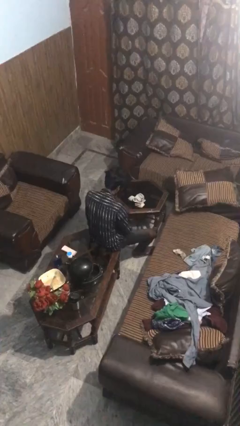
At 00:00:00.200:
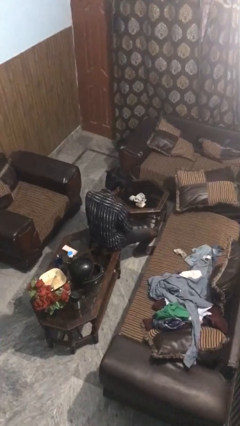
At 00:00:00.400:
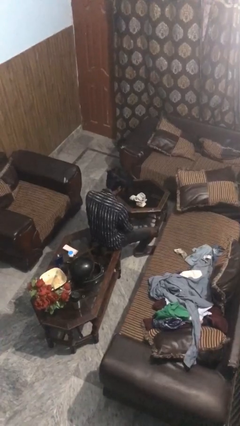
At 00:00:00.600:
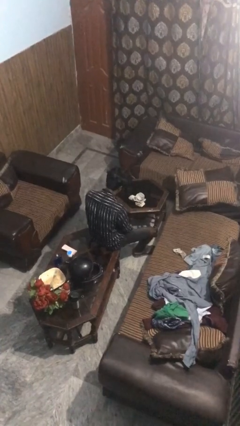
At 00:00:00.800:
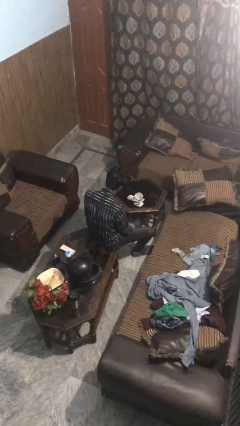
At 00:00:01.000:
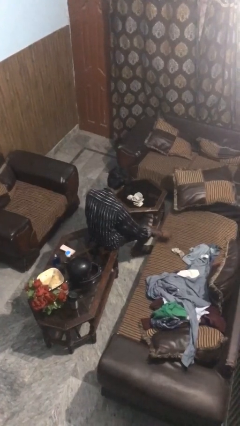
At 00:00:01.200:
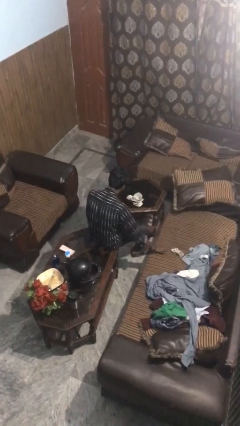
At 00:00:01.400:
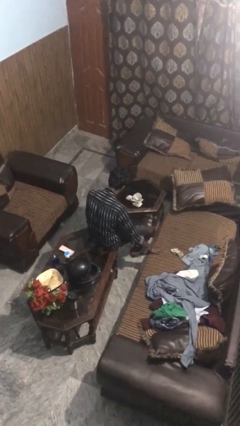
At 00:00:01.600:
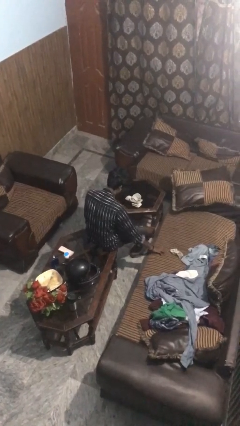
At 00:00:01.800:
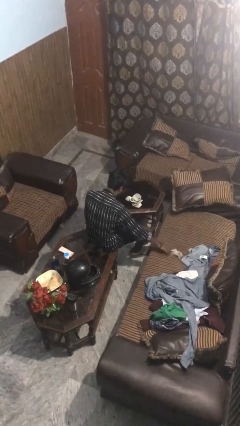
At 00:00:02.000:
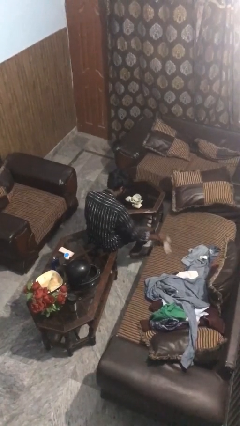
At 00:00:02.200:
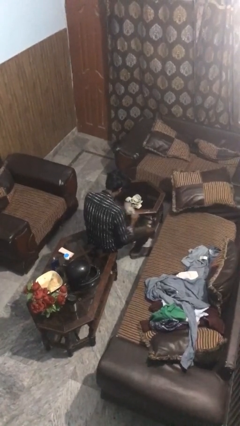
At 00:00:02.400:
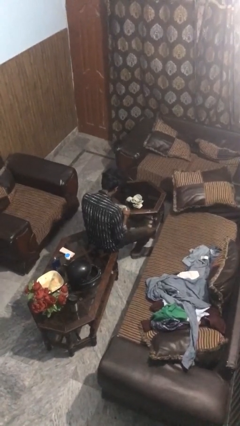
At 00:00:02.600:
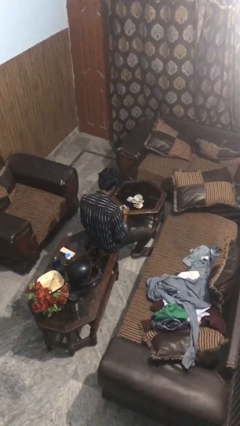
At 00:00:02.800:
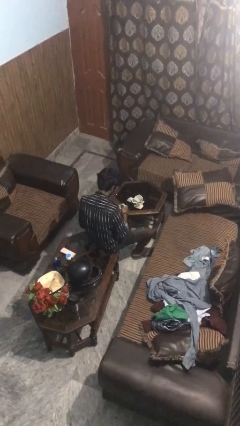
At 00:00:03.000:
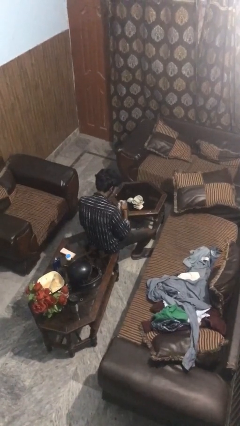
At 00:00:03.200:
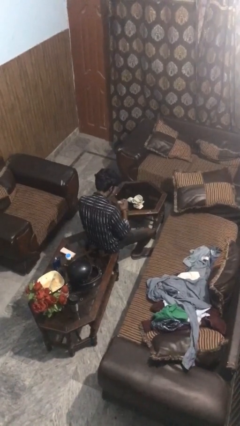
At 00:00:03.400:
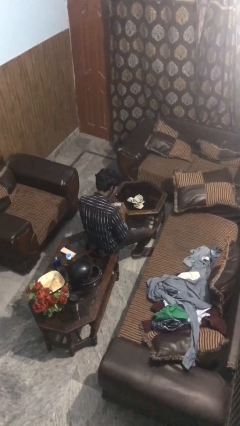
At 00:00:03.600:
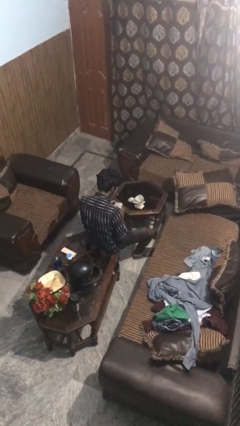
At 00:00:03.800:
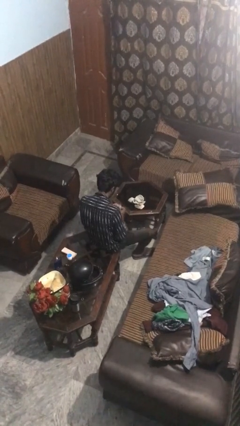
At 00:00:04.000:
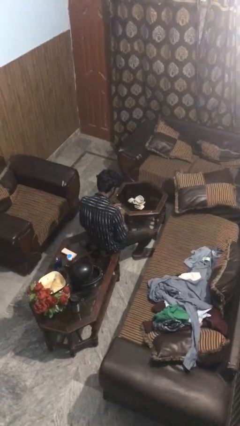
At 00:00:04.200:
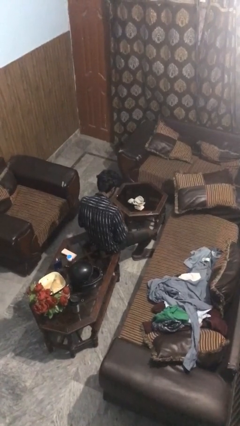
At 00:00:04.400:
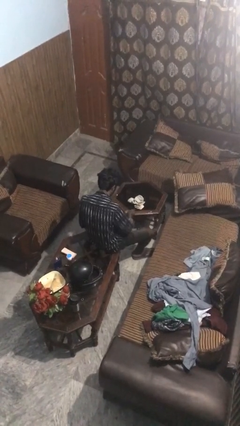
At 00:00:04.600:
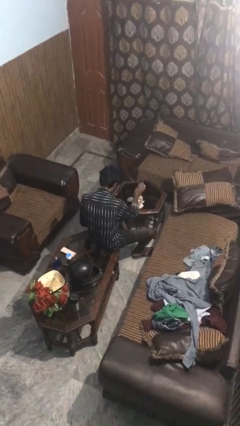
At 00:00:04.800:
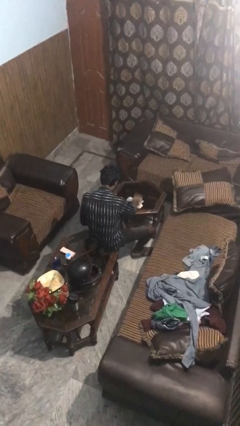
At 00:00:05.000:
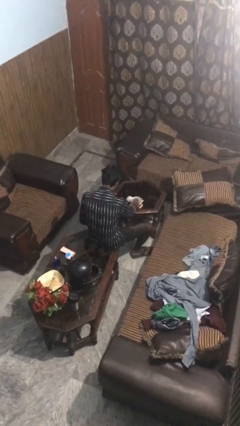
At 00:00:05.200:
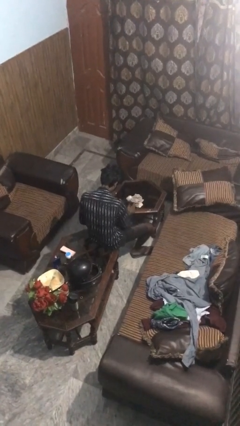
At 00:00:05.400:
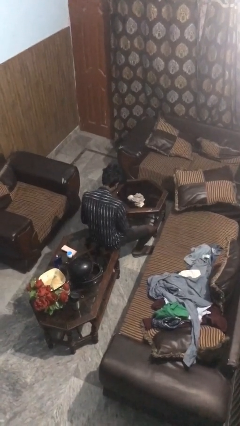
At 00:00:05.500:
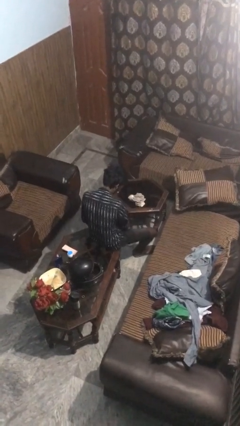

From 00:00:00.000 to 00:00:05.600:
person folds socks

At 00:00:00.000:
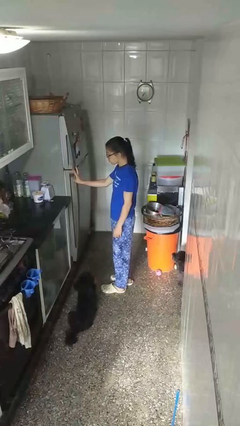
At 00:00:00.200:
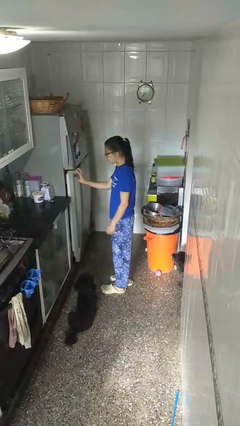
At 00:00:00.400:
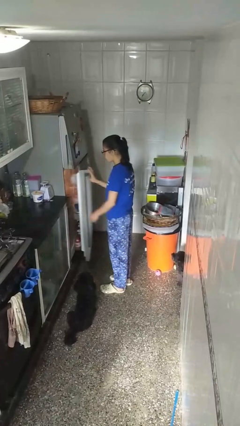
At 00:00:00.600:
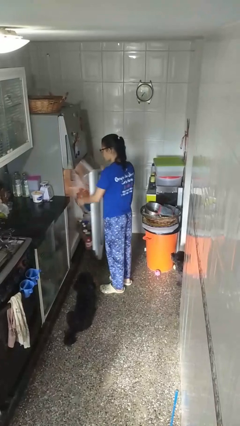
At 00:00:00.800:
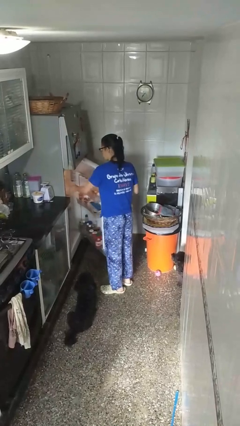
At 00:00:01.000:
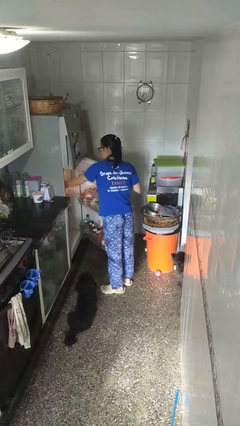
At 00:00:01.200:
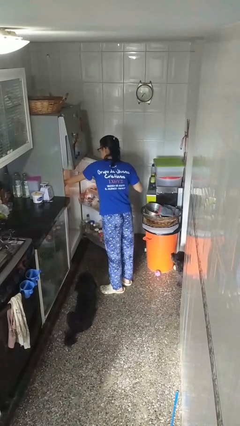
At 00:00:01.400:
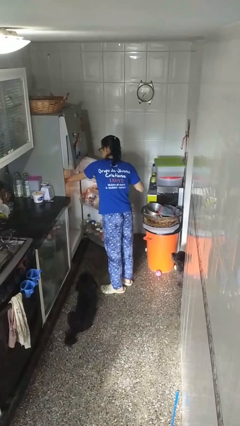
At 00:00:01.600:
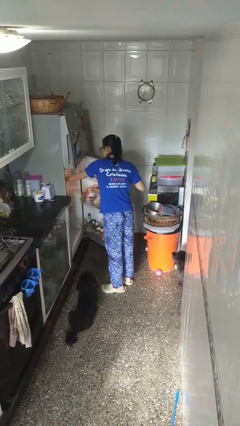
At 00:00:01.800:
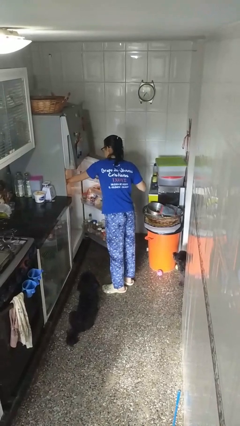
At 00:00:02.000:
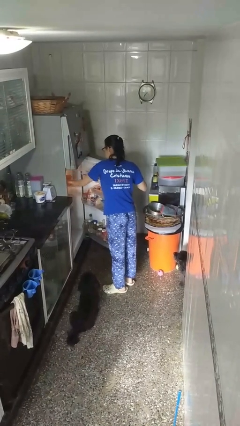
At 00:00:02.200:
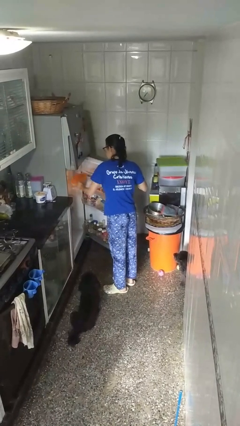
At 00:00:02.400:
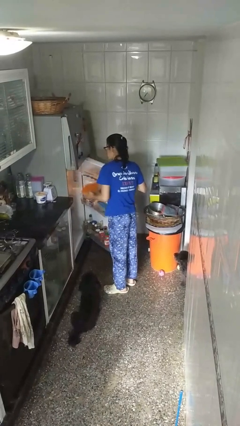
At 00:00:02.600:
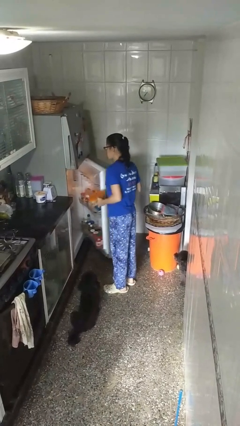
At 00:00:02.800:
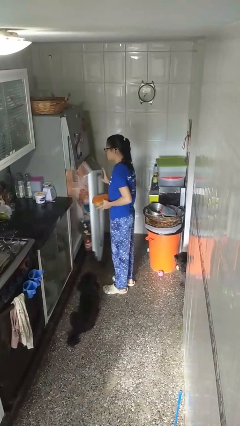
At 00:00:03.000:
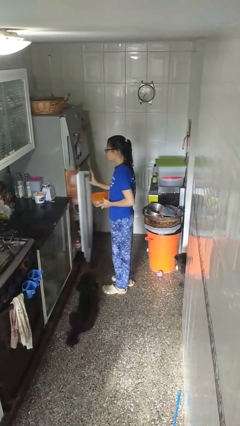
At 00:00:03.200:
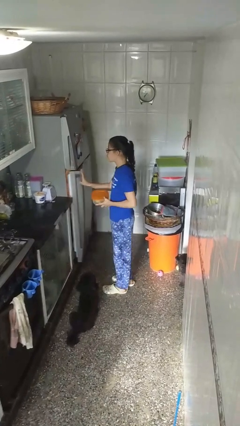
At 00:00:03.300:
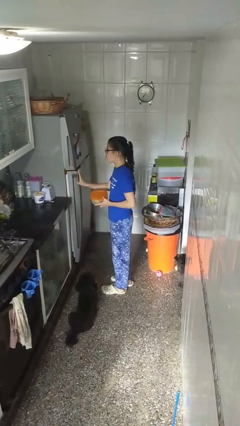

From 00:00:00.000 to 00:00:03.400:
person takes object from refrigerator

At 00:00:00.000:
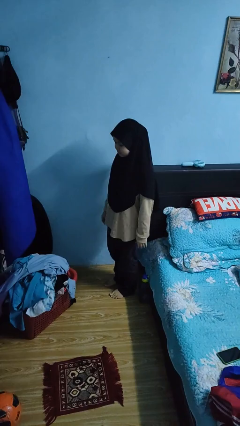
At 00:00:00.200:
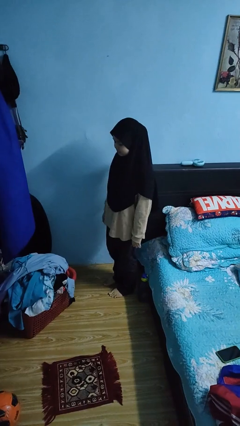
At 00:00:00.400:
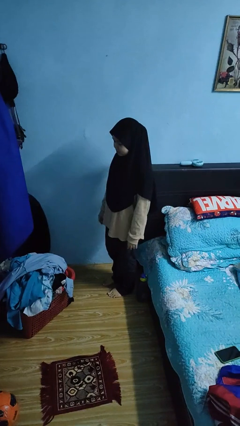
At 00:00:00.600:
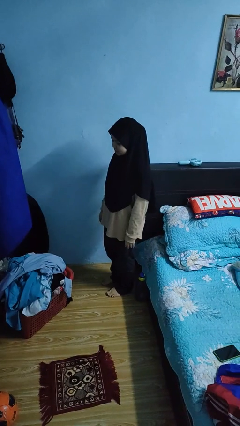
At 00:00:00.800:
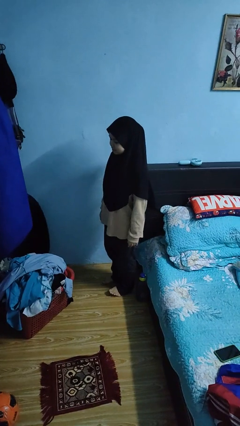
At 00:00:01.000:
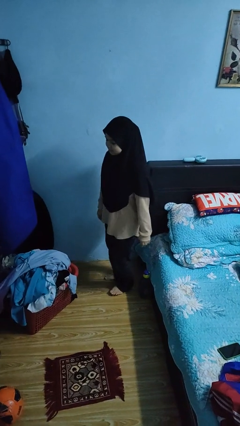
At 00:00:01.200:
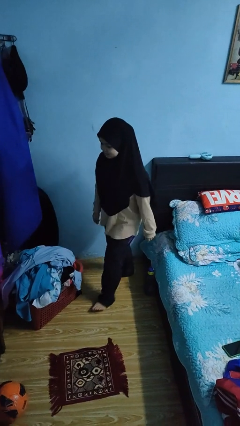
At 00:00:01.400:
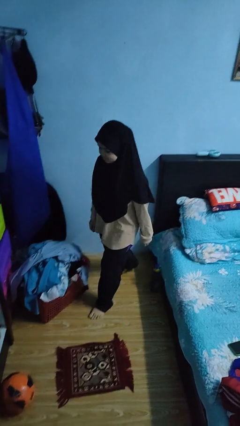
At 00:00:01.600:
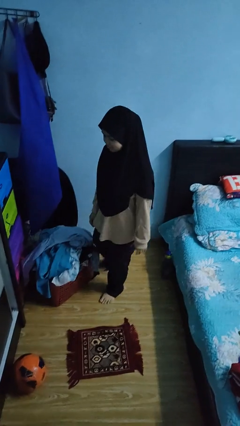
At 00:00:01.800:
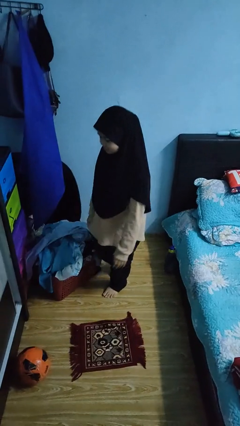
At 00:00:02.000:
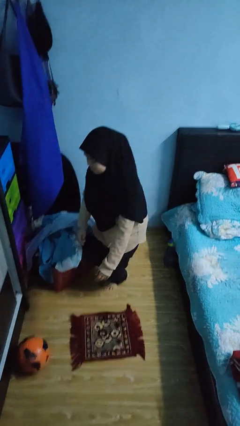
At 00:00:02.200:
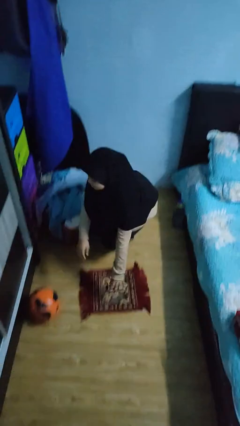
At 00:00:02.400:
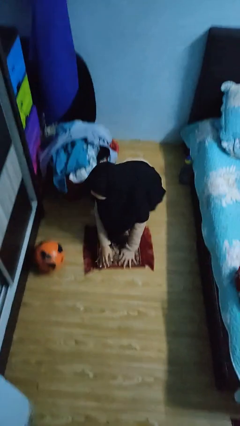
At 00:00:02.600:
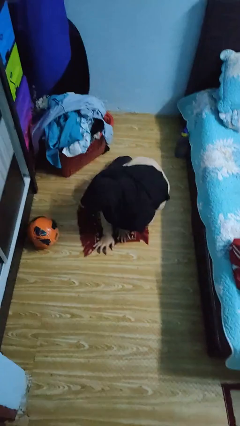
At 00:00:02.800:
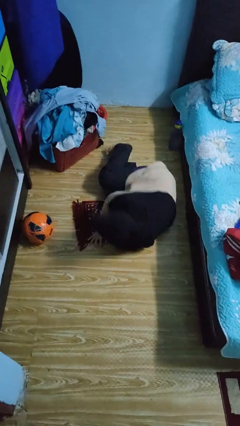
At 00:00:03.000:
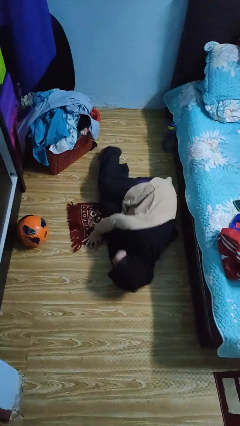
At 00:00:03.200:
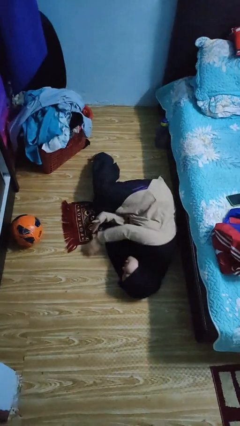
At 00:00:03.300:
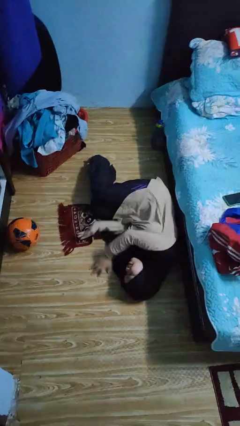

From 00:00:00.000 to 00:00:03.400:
person trips on object on floor

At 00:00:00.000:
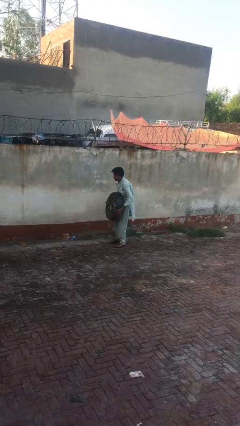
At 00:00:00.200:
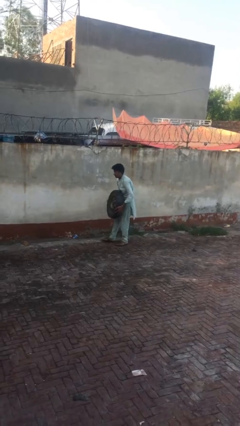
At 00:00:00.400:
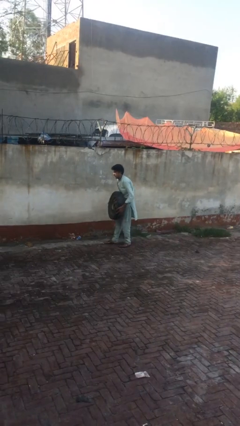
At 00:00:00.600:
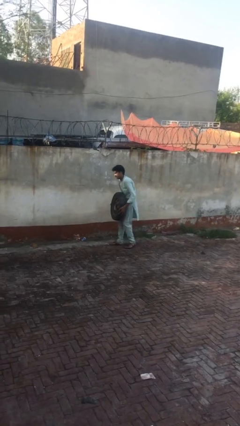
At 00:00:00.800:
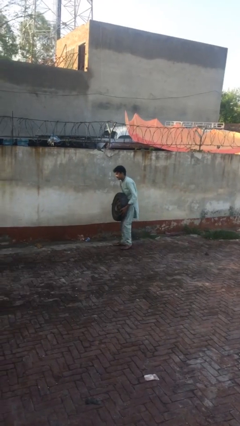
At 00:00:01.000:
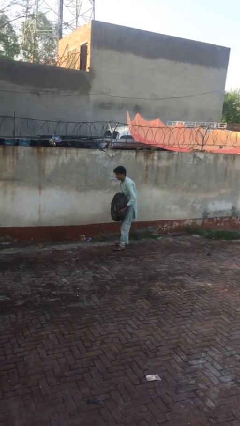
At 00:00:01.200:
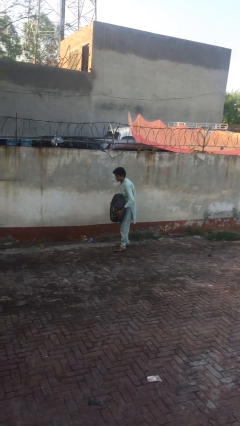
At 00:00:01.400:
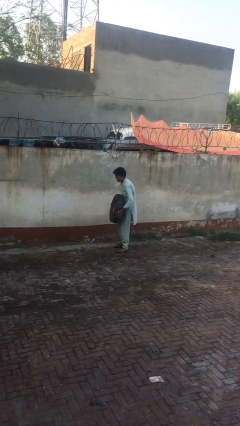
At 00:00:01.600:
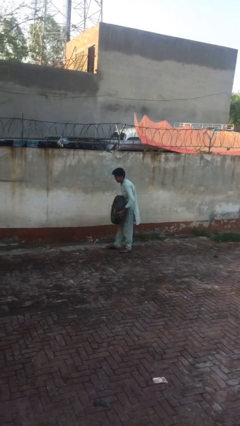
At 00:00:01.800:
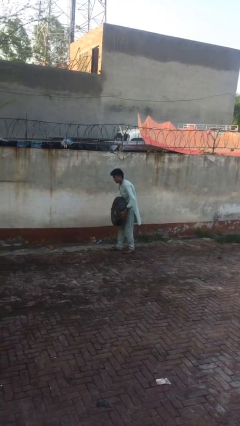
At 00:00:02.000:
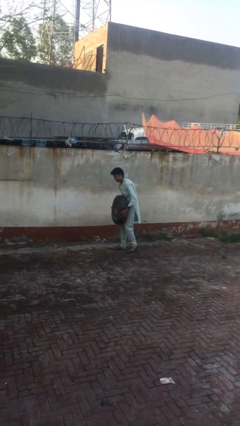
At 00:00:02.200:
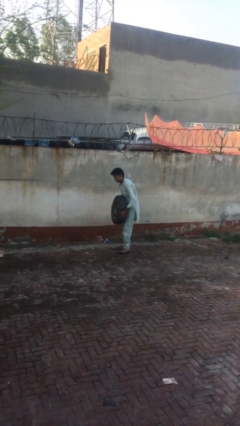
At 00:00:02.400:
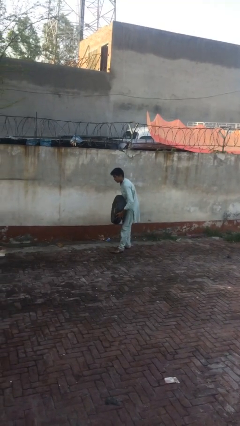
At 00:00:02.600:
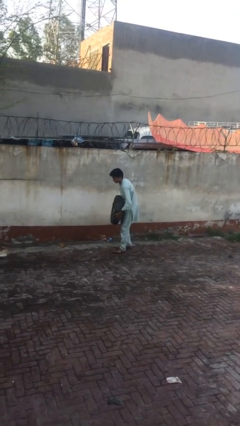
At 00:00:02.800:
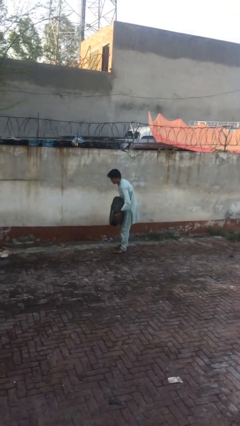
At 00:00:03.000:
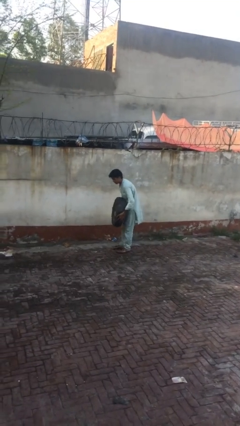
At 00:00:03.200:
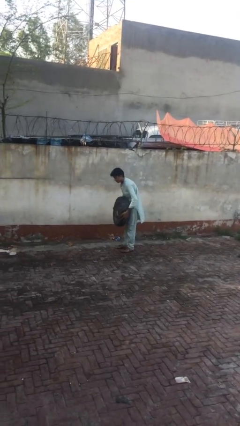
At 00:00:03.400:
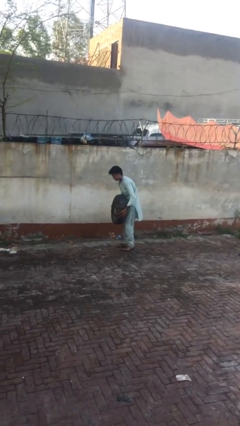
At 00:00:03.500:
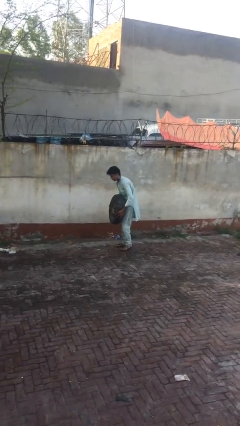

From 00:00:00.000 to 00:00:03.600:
person carries heavy object

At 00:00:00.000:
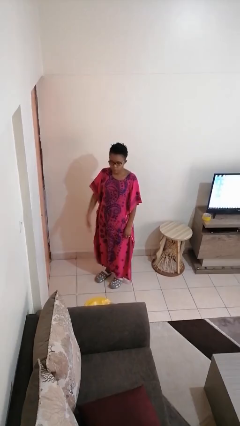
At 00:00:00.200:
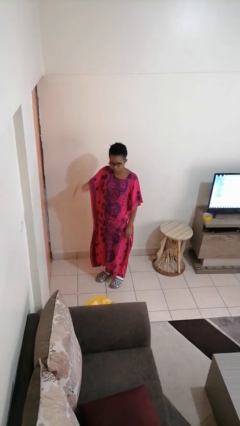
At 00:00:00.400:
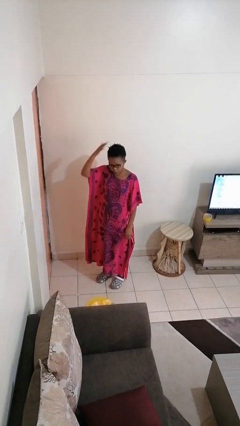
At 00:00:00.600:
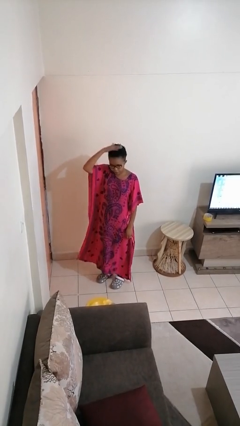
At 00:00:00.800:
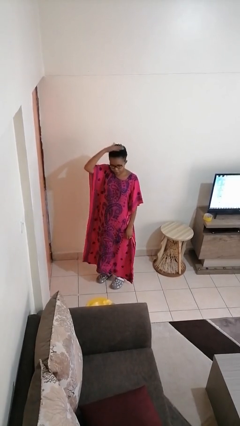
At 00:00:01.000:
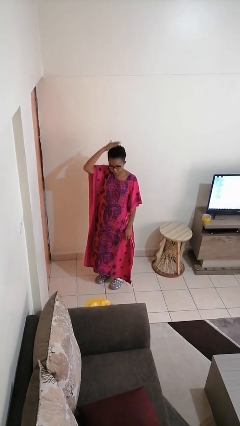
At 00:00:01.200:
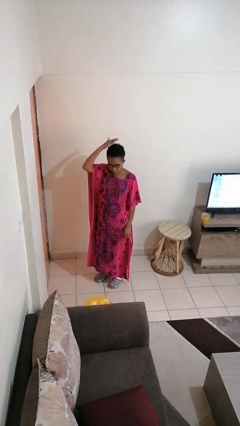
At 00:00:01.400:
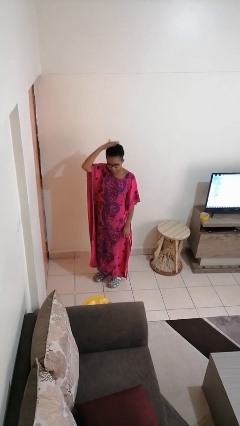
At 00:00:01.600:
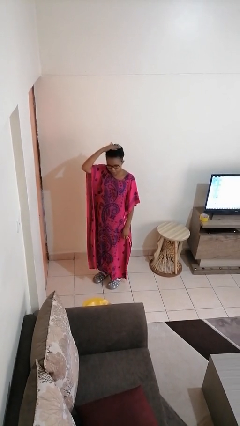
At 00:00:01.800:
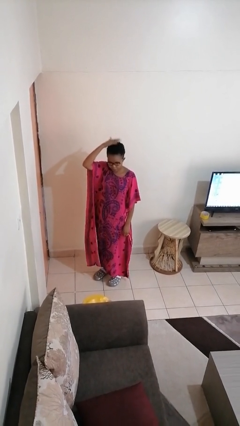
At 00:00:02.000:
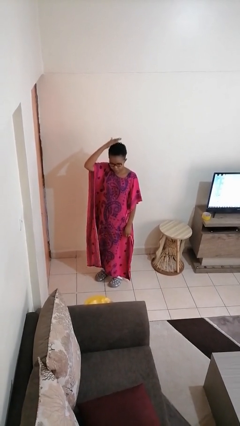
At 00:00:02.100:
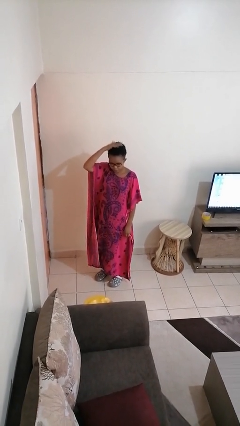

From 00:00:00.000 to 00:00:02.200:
person pats head
